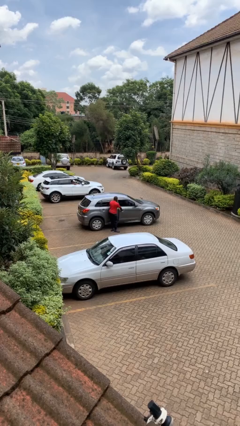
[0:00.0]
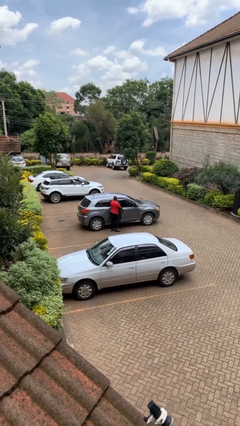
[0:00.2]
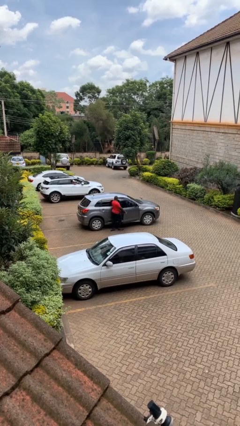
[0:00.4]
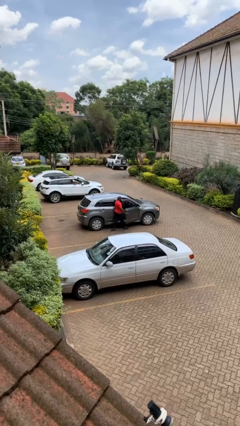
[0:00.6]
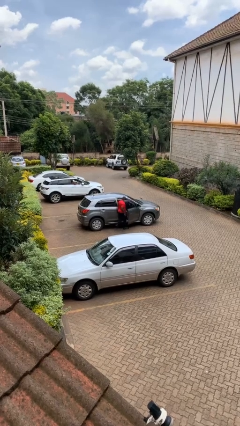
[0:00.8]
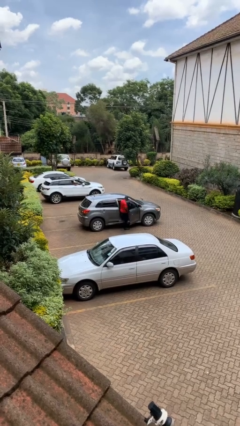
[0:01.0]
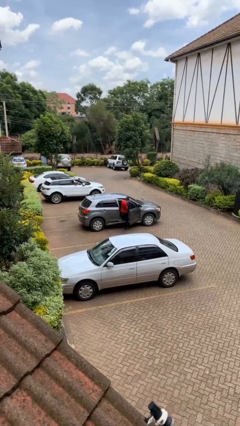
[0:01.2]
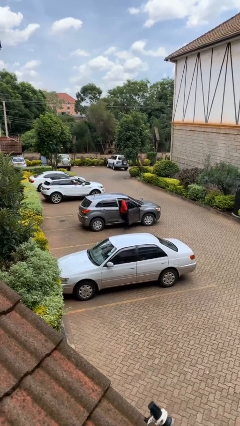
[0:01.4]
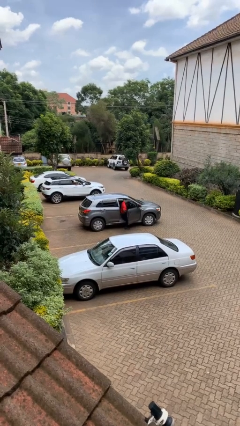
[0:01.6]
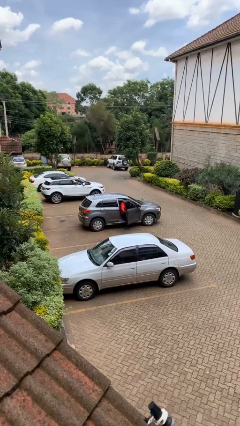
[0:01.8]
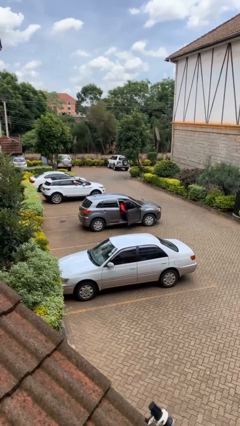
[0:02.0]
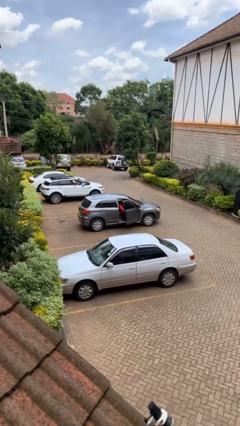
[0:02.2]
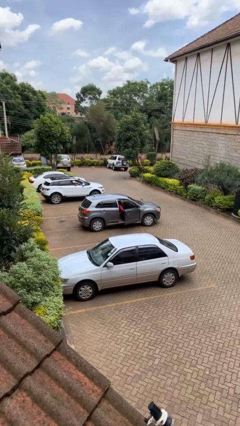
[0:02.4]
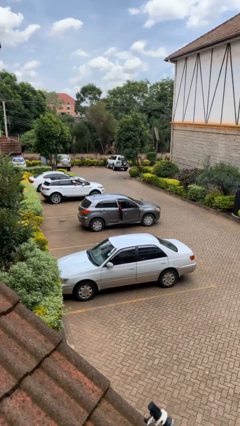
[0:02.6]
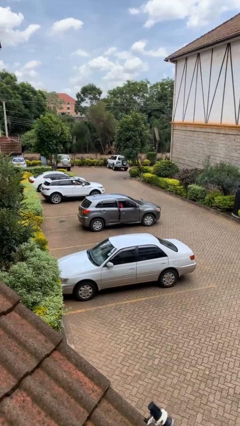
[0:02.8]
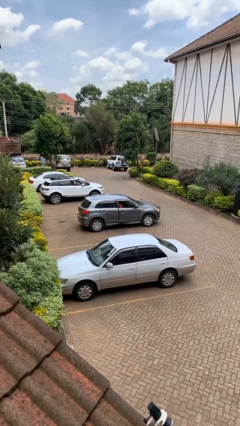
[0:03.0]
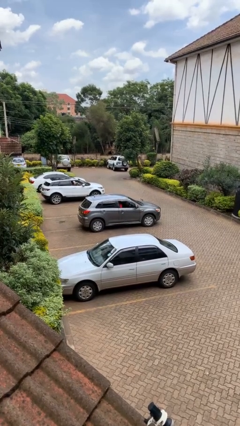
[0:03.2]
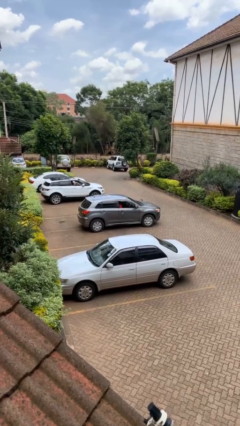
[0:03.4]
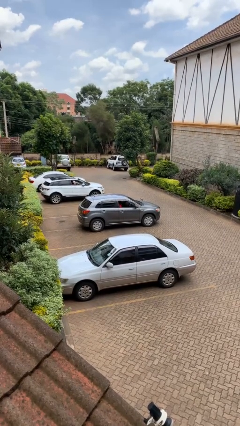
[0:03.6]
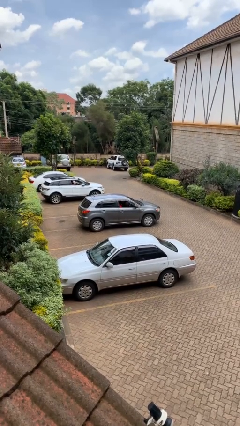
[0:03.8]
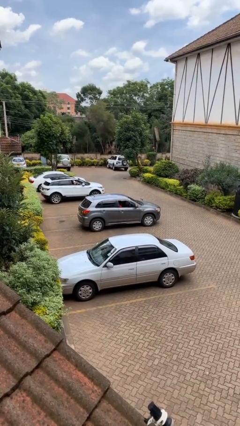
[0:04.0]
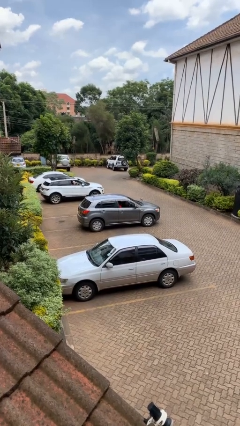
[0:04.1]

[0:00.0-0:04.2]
car picks up person

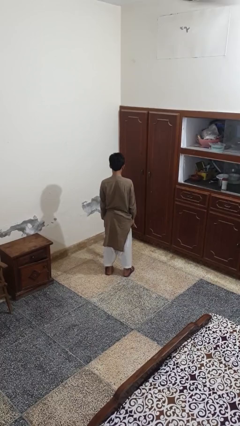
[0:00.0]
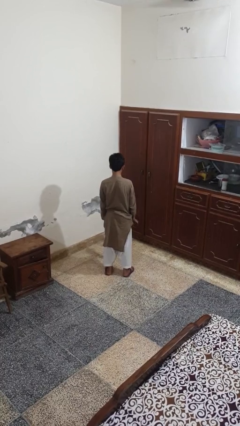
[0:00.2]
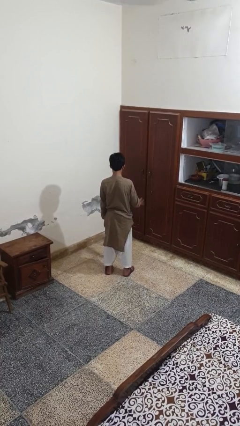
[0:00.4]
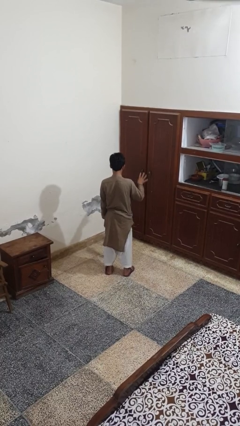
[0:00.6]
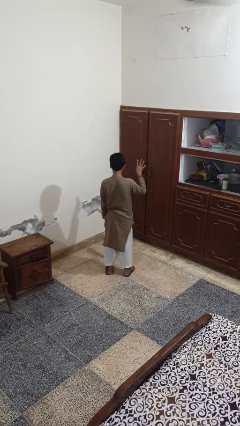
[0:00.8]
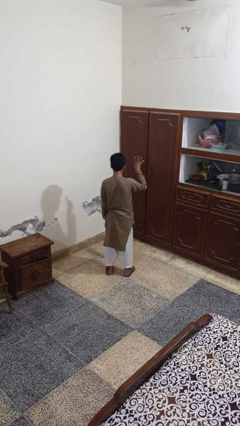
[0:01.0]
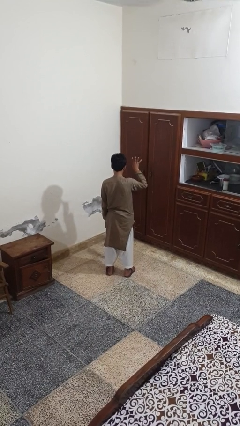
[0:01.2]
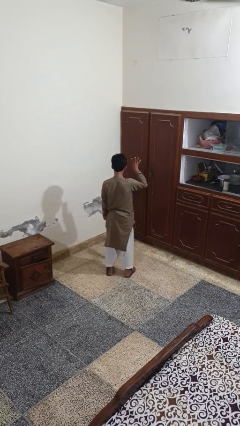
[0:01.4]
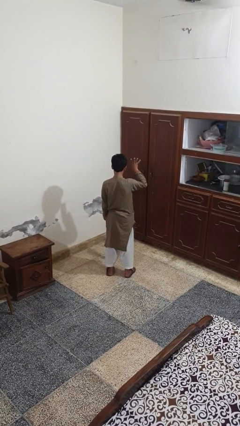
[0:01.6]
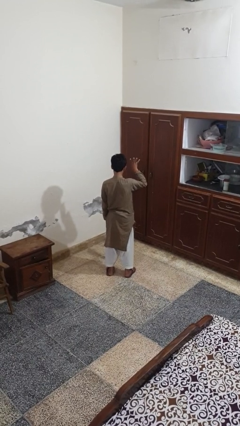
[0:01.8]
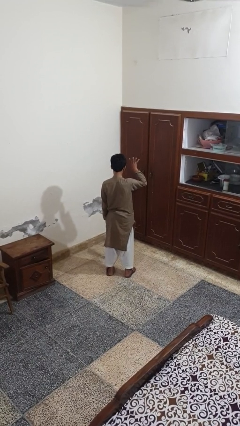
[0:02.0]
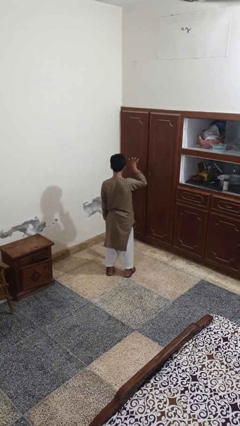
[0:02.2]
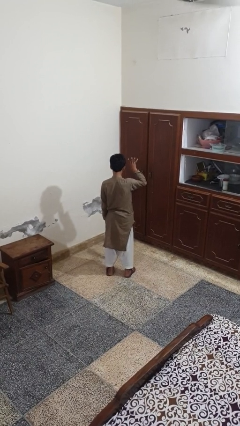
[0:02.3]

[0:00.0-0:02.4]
person gestures number four

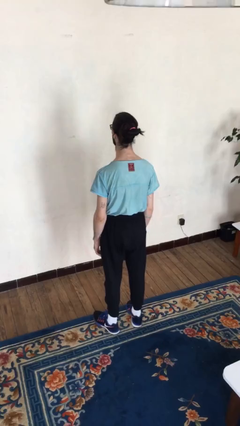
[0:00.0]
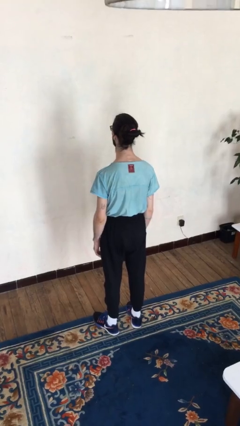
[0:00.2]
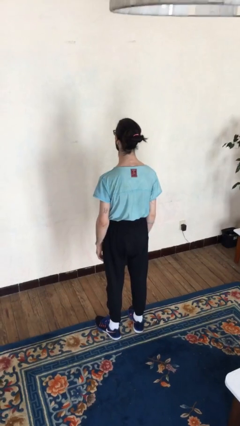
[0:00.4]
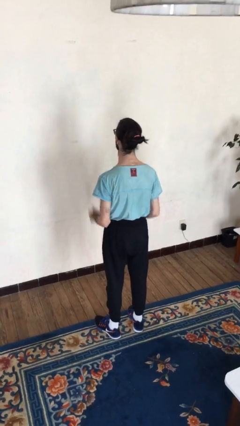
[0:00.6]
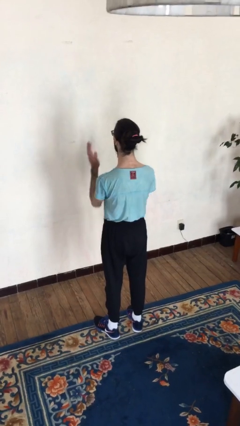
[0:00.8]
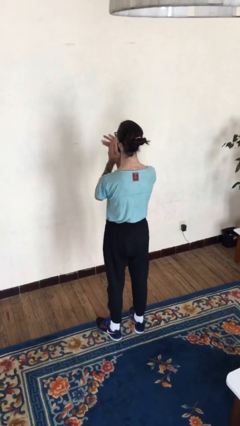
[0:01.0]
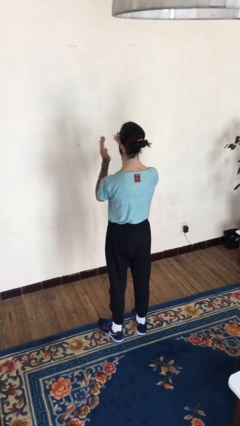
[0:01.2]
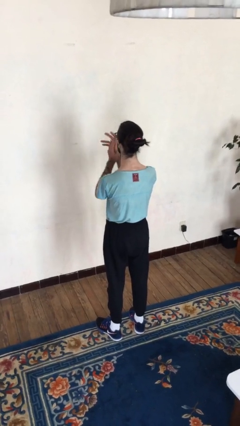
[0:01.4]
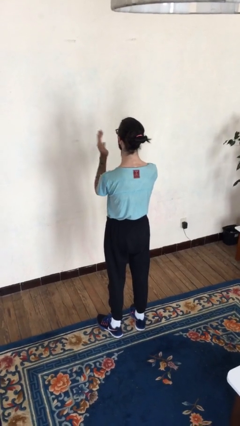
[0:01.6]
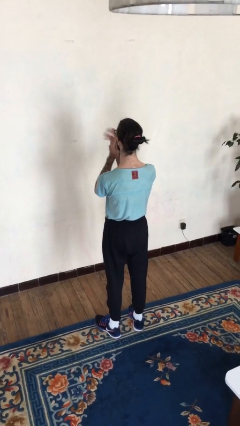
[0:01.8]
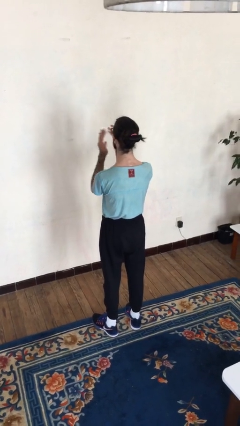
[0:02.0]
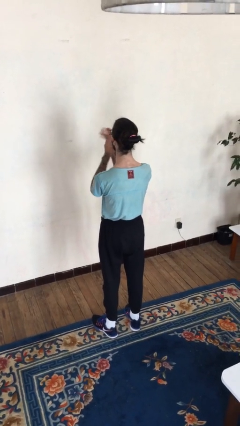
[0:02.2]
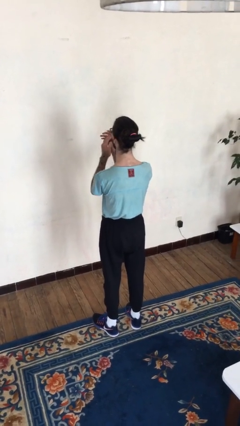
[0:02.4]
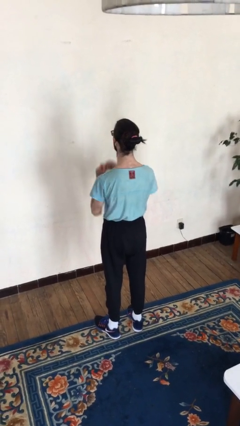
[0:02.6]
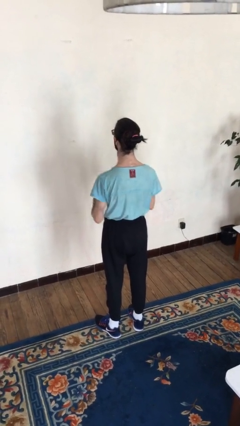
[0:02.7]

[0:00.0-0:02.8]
person claps hands

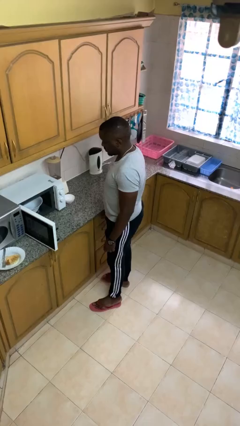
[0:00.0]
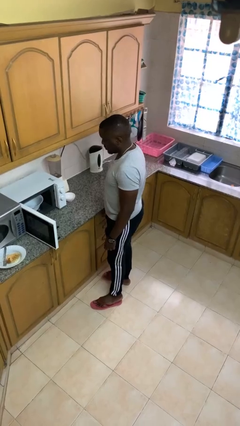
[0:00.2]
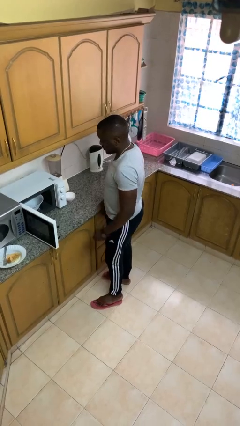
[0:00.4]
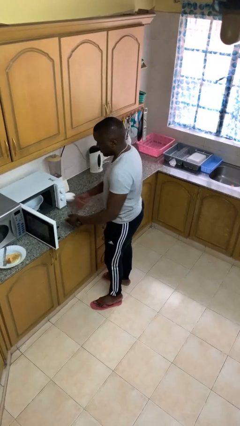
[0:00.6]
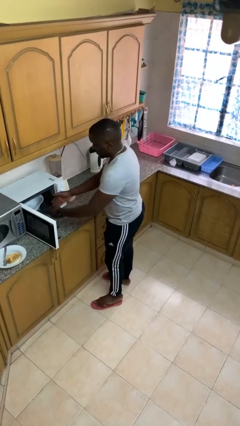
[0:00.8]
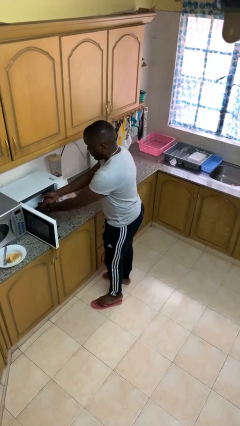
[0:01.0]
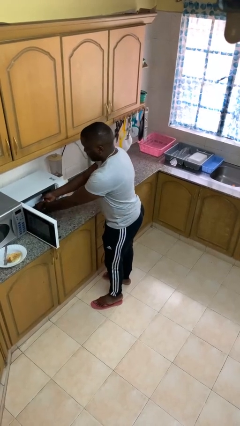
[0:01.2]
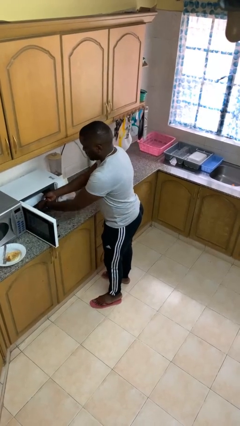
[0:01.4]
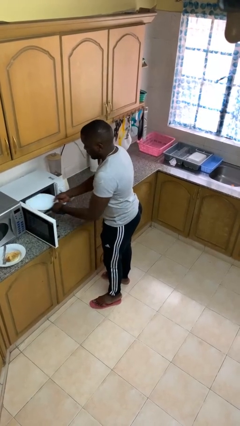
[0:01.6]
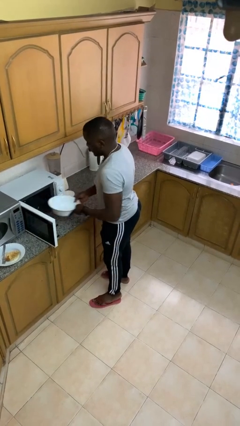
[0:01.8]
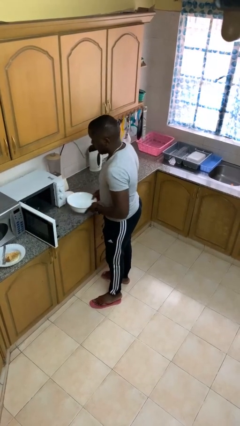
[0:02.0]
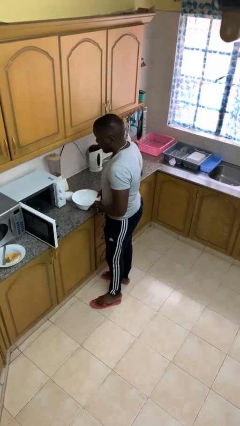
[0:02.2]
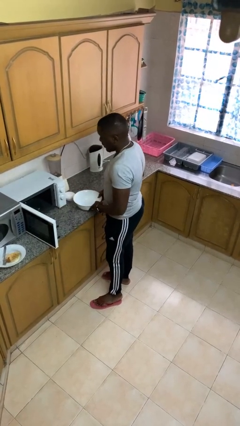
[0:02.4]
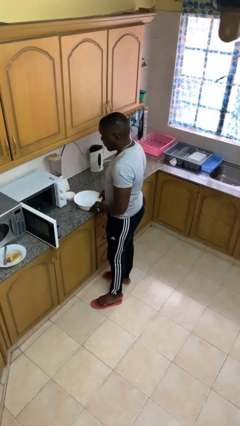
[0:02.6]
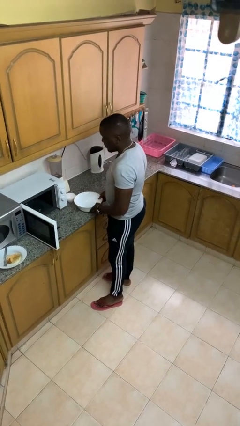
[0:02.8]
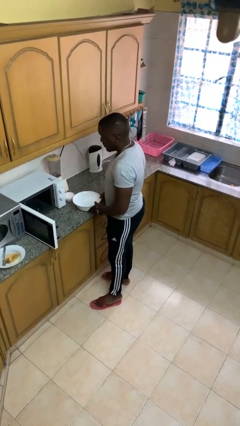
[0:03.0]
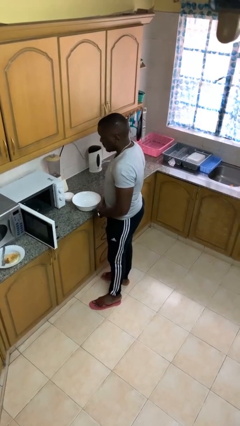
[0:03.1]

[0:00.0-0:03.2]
person takes object from microwave

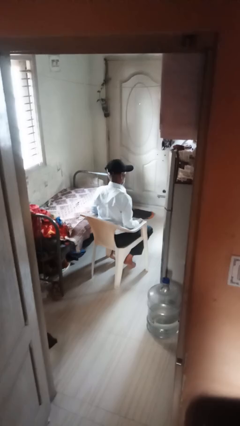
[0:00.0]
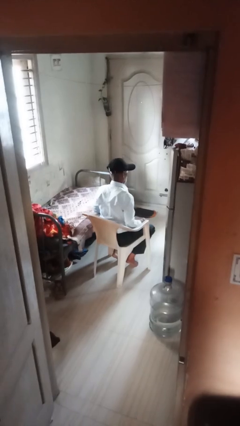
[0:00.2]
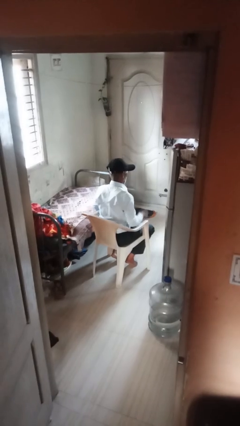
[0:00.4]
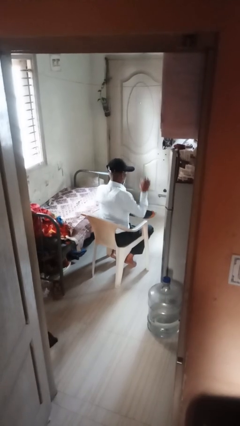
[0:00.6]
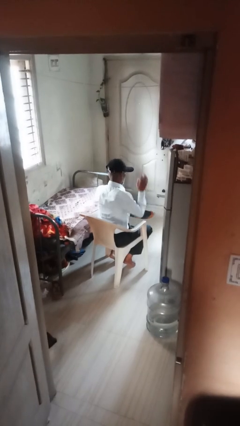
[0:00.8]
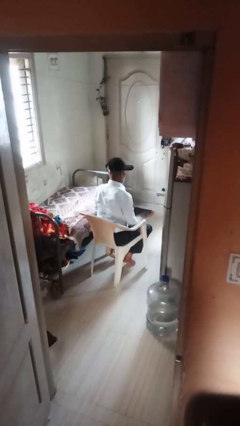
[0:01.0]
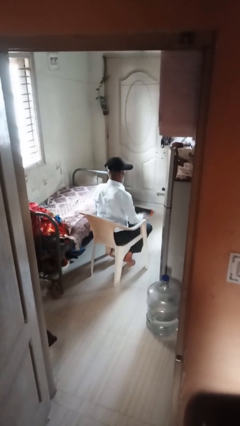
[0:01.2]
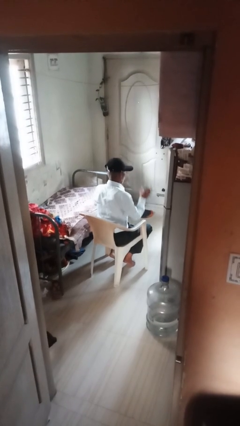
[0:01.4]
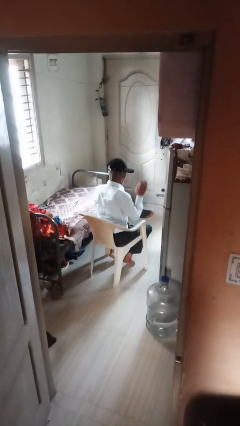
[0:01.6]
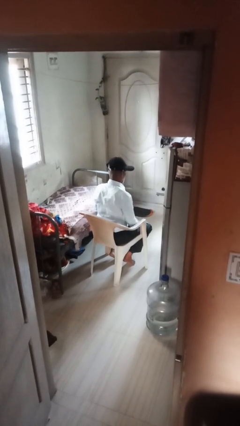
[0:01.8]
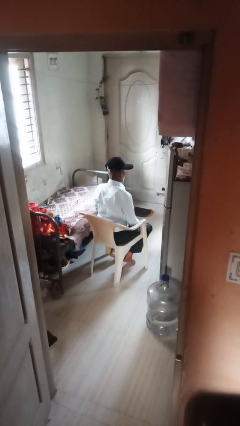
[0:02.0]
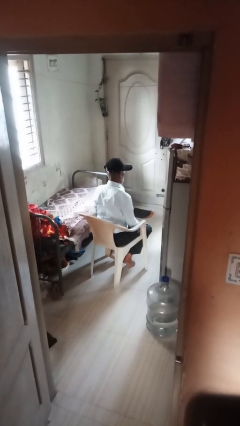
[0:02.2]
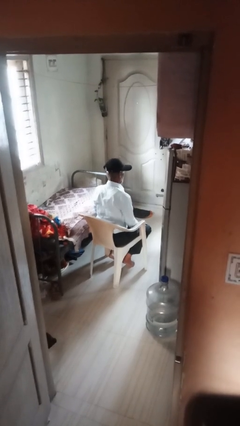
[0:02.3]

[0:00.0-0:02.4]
person slaps hands on thighs

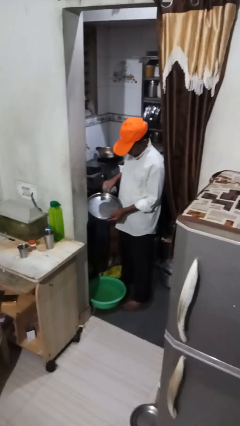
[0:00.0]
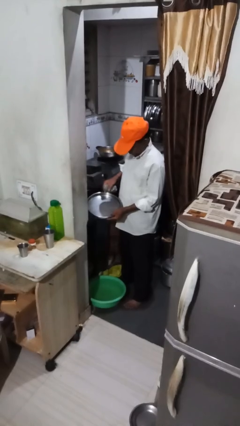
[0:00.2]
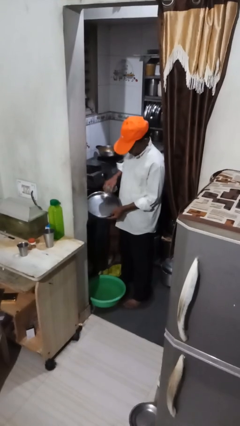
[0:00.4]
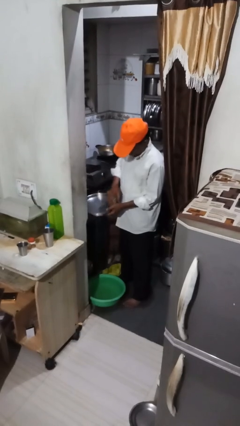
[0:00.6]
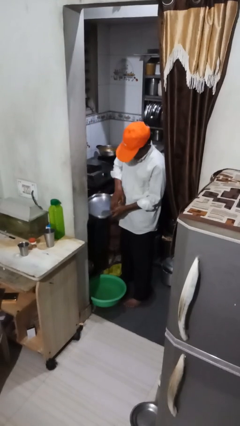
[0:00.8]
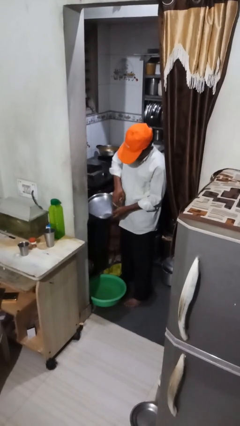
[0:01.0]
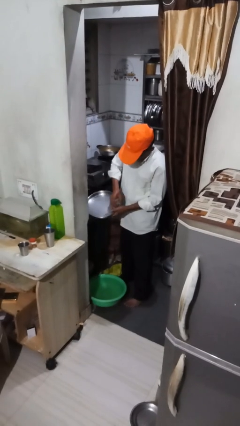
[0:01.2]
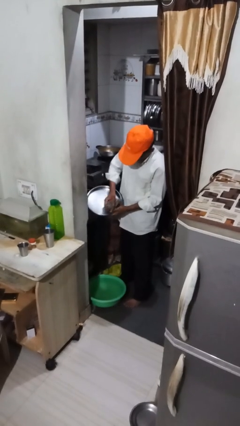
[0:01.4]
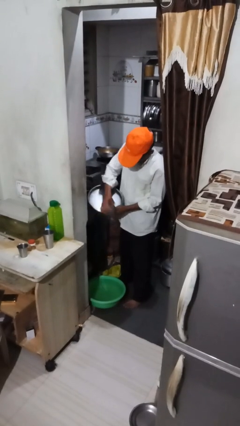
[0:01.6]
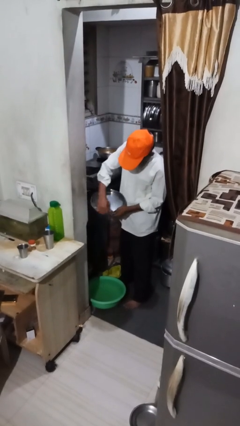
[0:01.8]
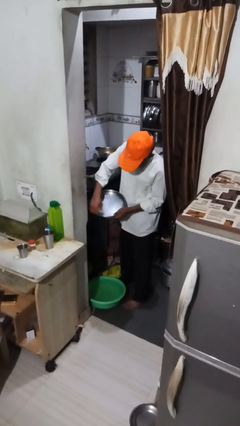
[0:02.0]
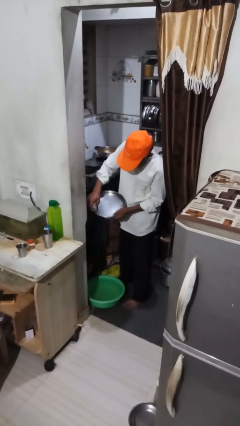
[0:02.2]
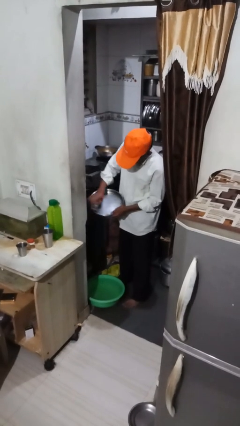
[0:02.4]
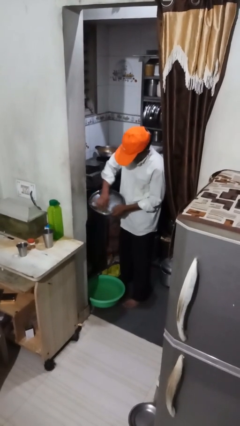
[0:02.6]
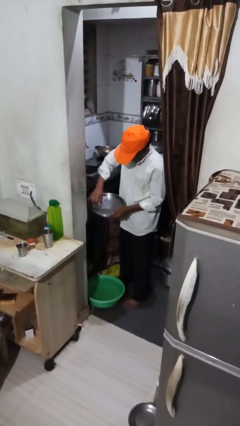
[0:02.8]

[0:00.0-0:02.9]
person dries dish
